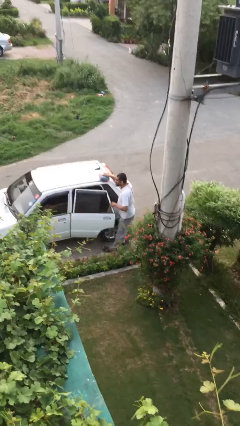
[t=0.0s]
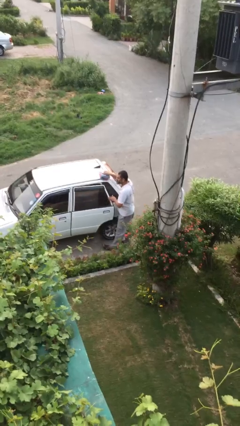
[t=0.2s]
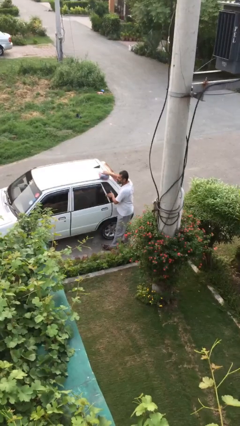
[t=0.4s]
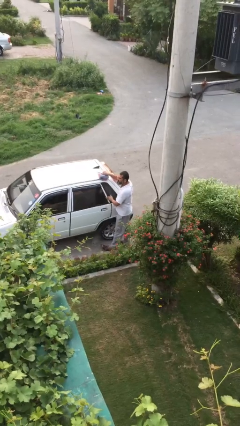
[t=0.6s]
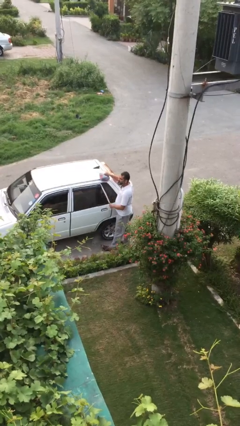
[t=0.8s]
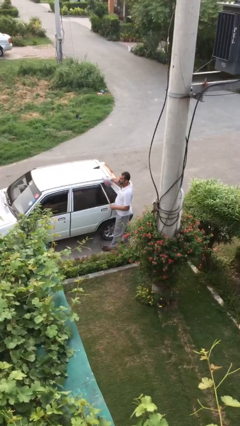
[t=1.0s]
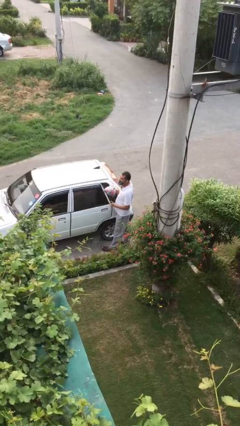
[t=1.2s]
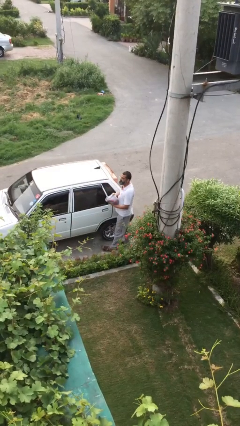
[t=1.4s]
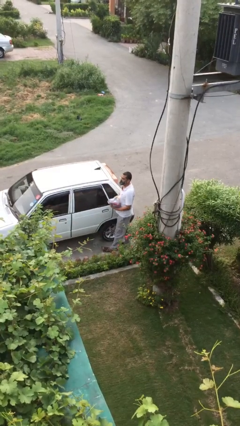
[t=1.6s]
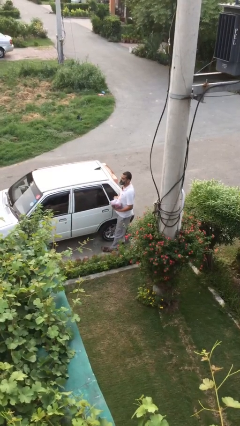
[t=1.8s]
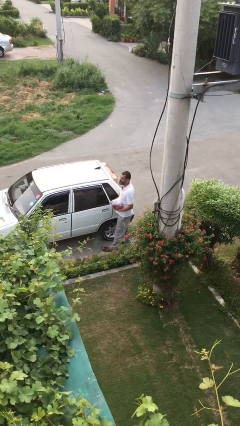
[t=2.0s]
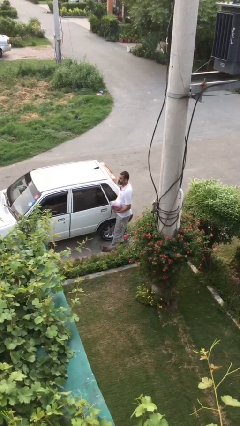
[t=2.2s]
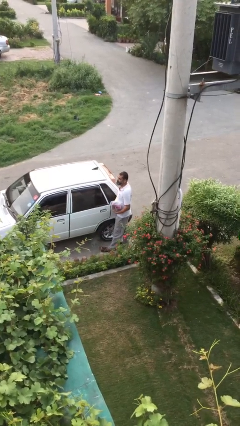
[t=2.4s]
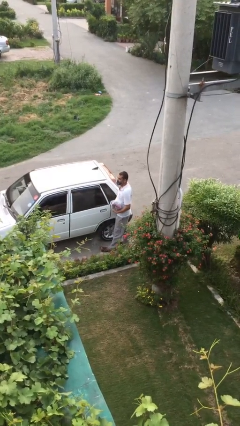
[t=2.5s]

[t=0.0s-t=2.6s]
person closes car door

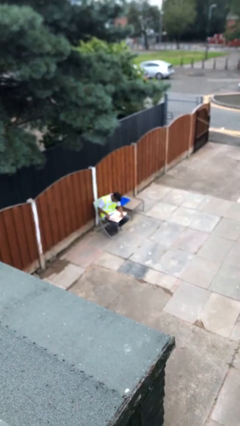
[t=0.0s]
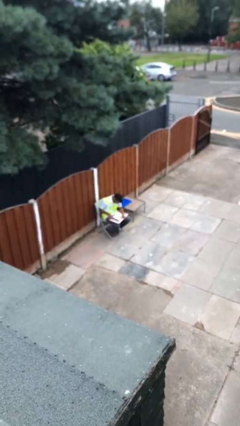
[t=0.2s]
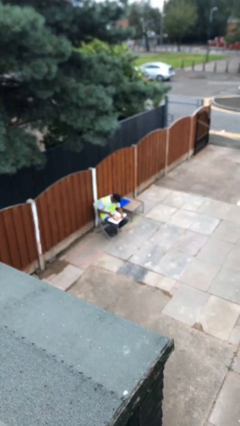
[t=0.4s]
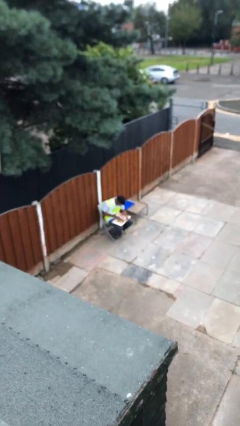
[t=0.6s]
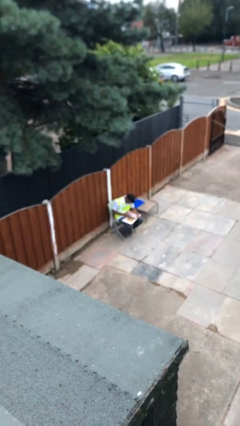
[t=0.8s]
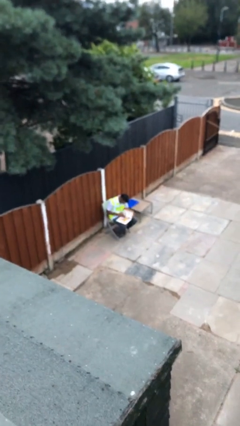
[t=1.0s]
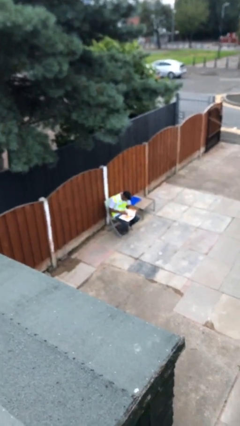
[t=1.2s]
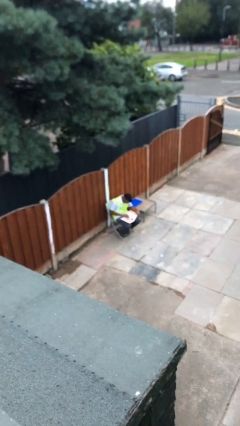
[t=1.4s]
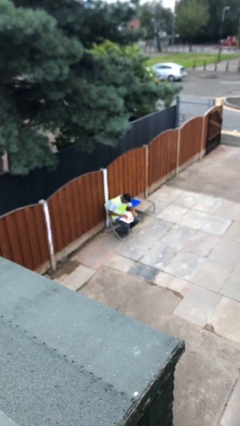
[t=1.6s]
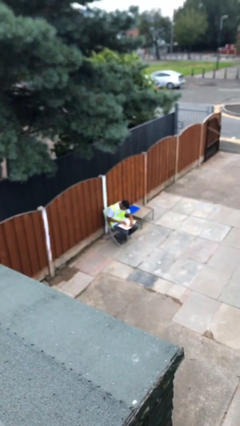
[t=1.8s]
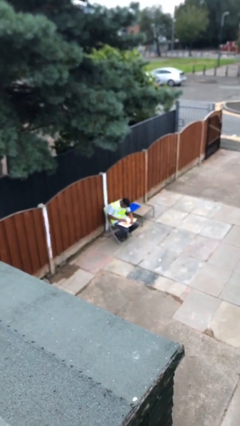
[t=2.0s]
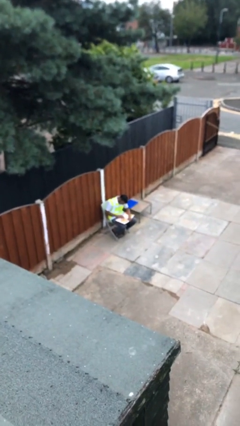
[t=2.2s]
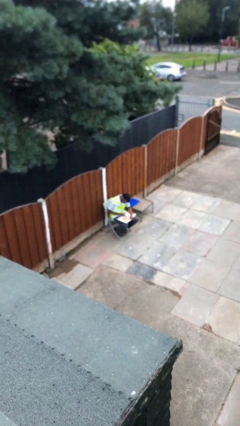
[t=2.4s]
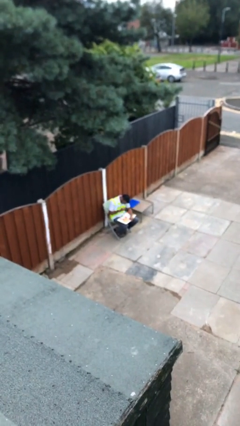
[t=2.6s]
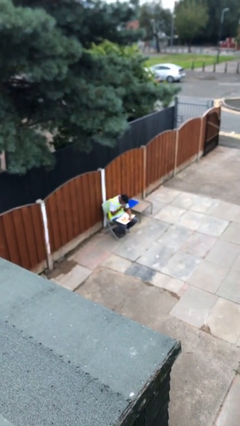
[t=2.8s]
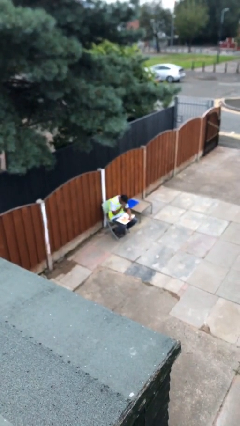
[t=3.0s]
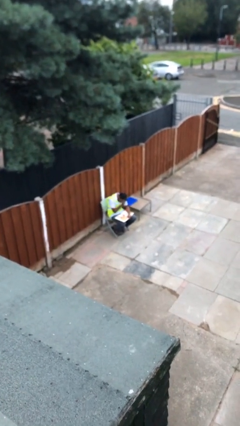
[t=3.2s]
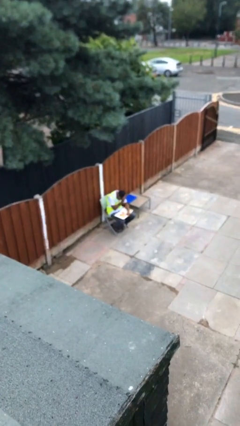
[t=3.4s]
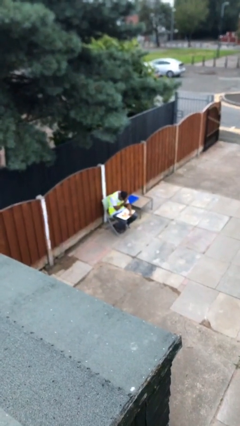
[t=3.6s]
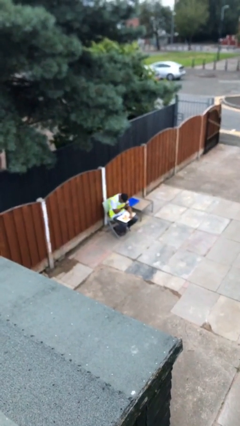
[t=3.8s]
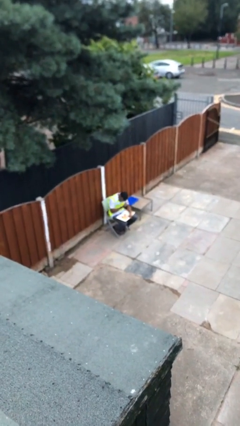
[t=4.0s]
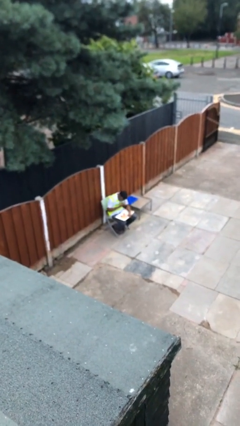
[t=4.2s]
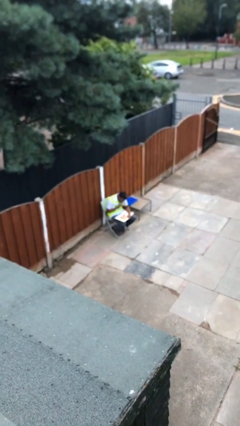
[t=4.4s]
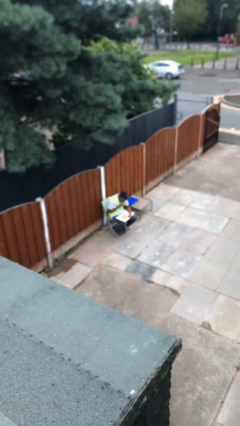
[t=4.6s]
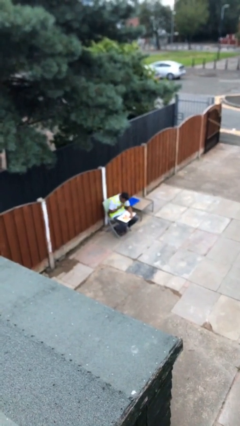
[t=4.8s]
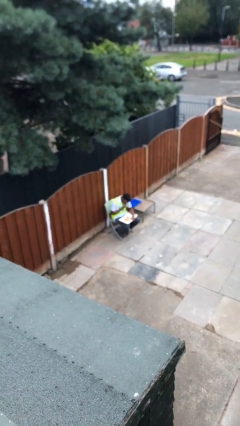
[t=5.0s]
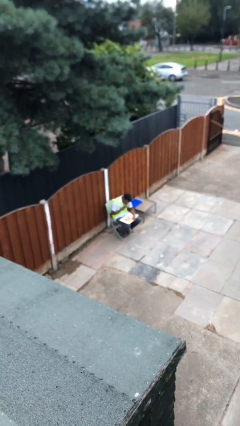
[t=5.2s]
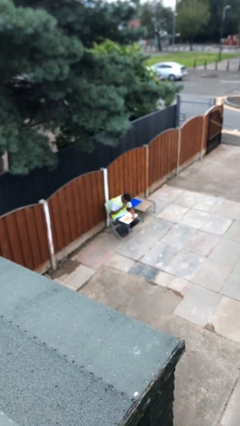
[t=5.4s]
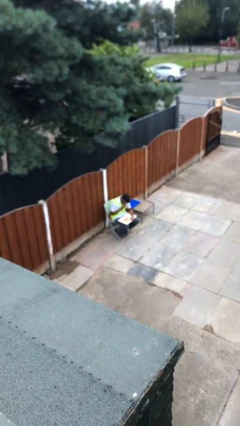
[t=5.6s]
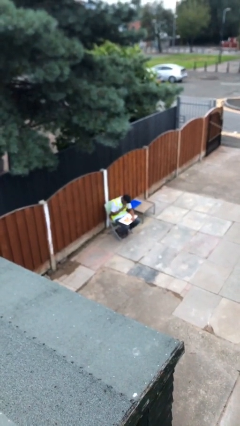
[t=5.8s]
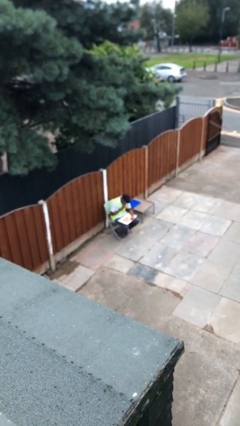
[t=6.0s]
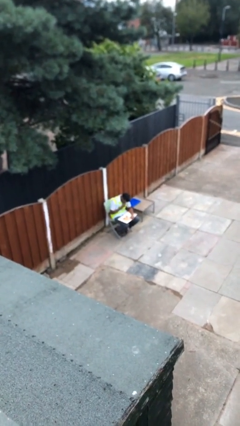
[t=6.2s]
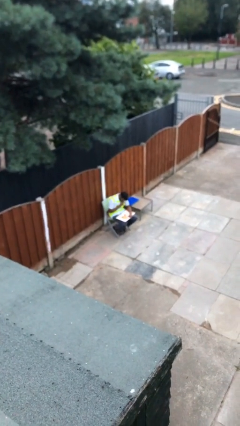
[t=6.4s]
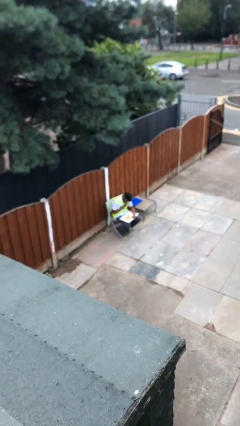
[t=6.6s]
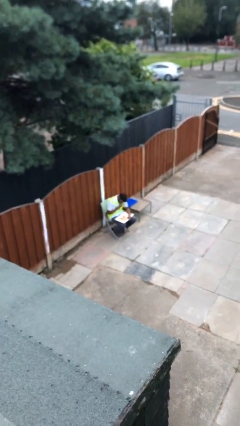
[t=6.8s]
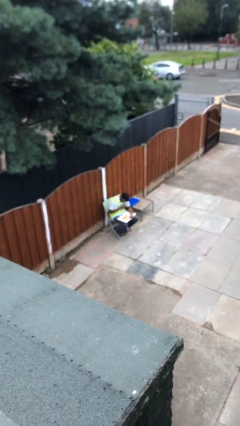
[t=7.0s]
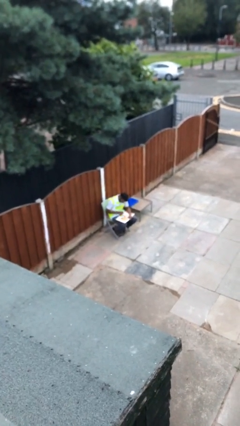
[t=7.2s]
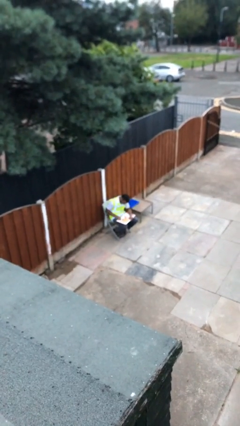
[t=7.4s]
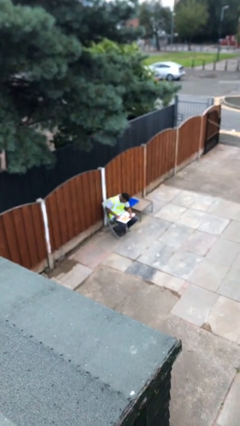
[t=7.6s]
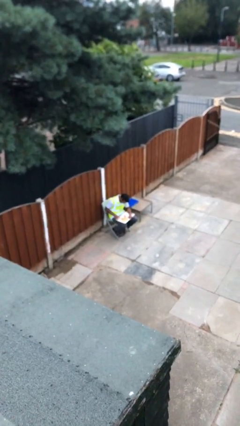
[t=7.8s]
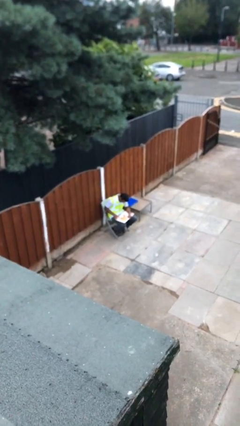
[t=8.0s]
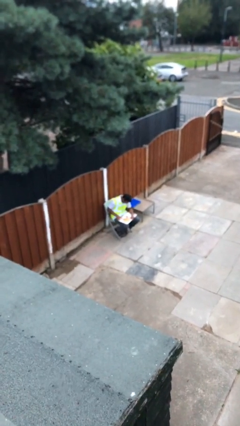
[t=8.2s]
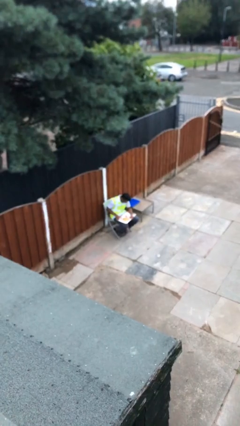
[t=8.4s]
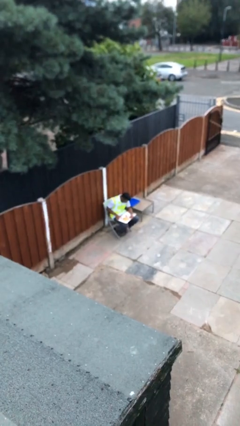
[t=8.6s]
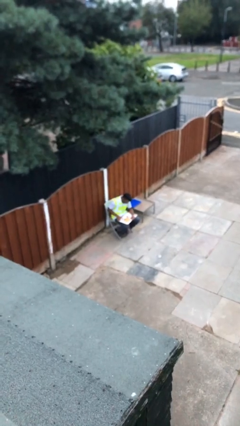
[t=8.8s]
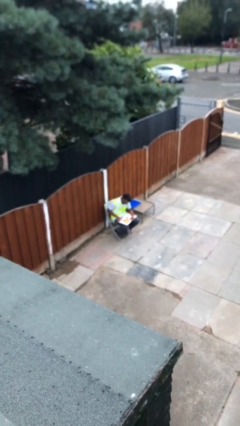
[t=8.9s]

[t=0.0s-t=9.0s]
person reads document

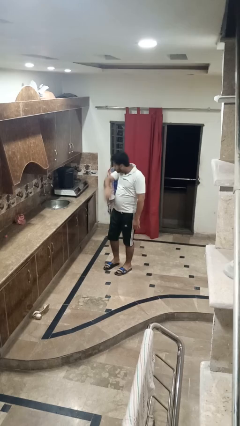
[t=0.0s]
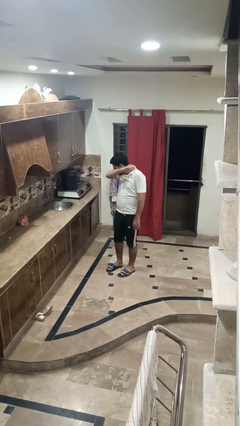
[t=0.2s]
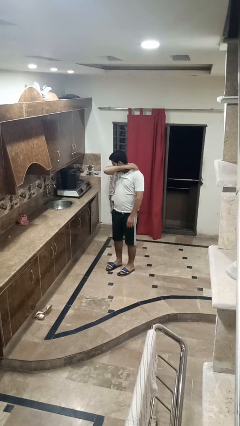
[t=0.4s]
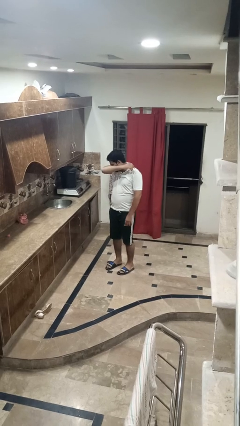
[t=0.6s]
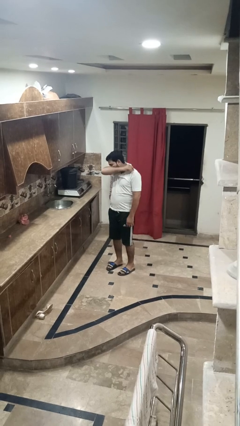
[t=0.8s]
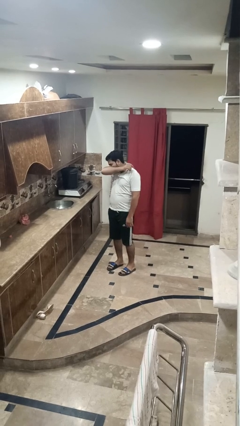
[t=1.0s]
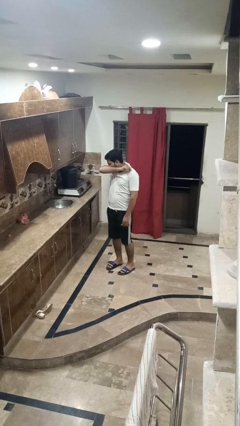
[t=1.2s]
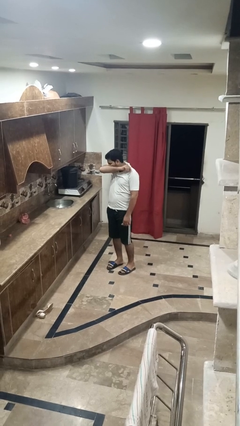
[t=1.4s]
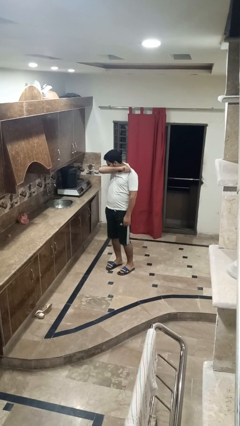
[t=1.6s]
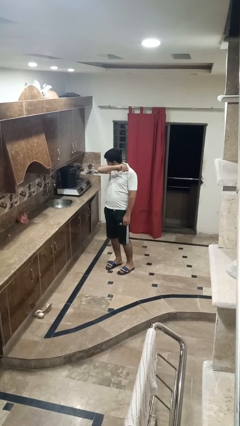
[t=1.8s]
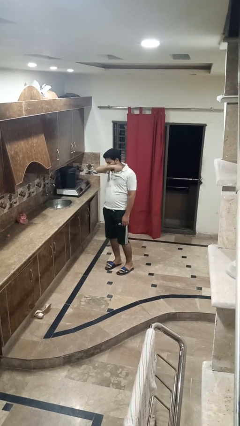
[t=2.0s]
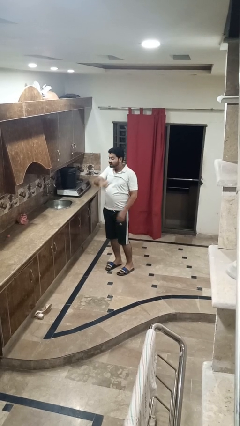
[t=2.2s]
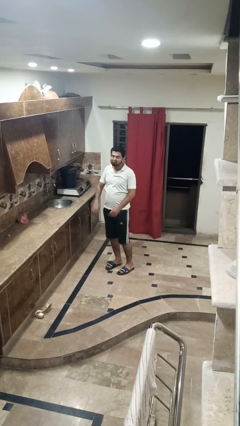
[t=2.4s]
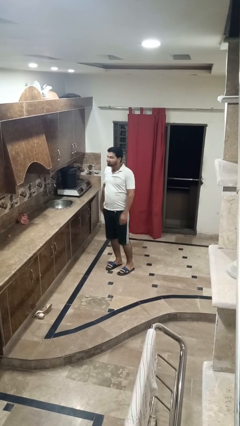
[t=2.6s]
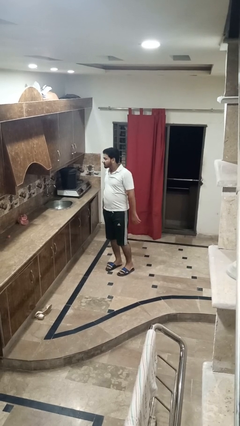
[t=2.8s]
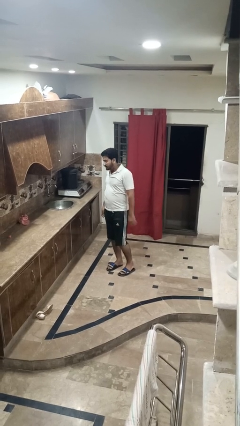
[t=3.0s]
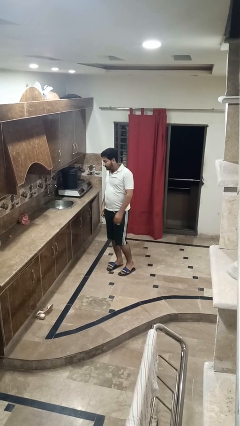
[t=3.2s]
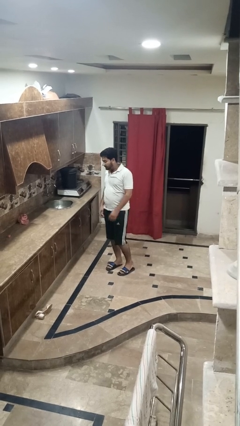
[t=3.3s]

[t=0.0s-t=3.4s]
person sneezes into arm

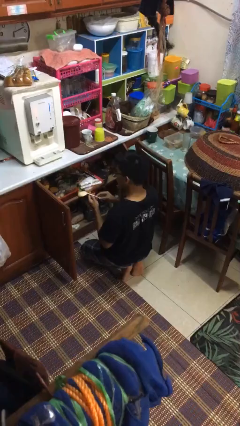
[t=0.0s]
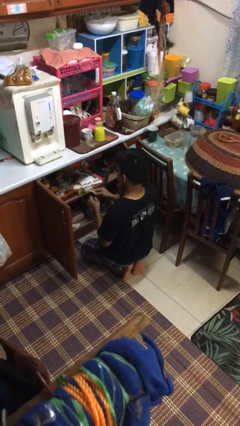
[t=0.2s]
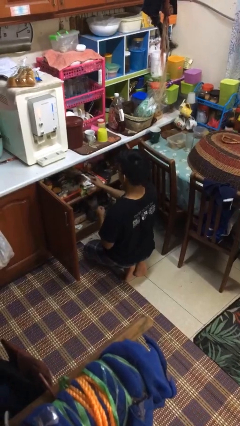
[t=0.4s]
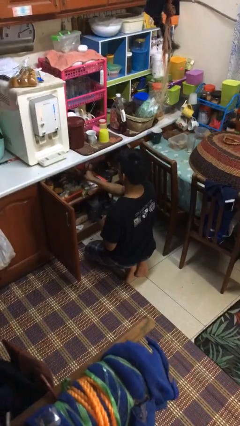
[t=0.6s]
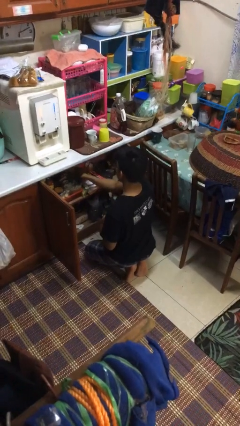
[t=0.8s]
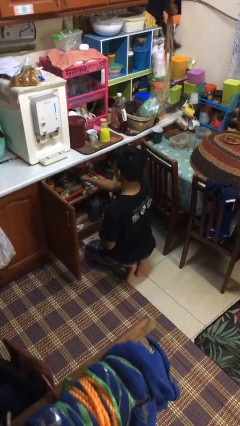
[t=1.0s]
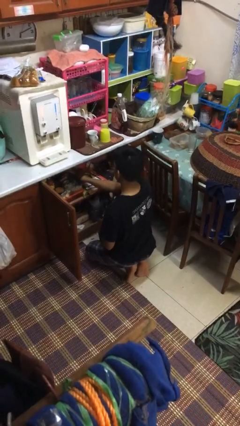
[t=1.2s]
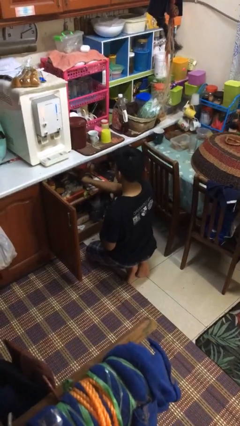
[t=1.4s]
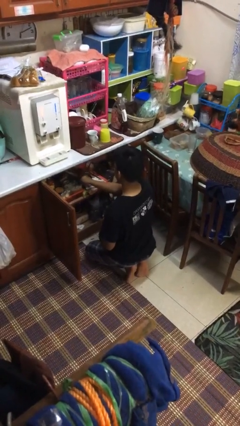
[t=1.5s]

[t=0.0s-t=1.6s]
person puts object into kitchen drawer

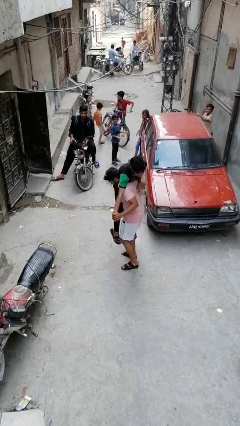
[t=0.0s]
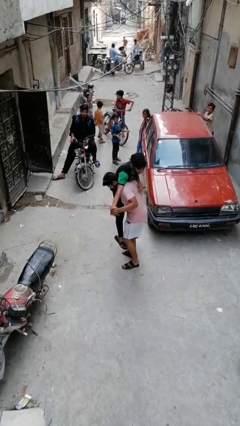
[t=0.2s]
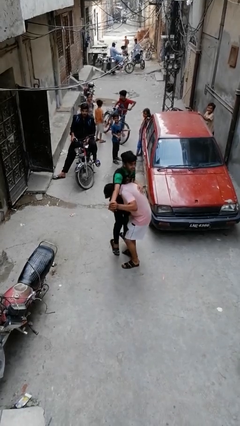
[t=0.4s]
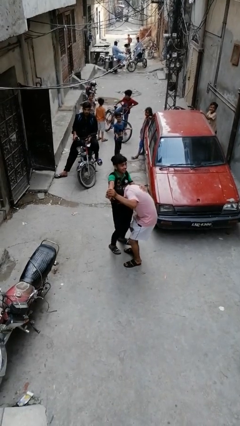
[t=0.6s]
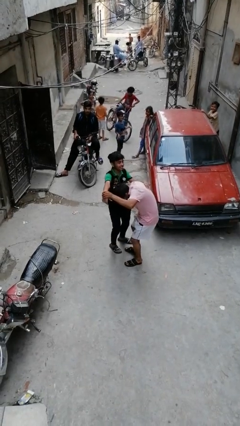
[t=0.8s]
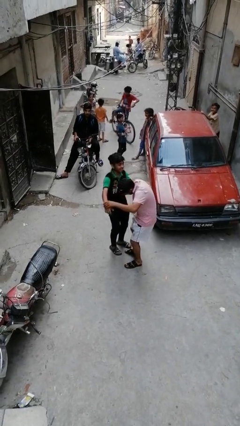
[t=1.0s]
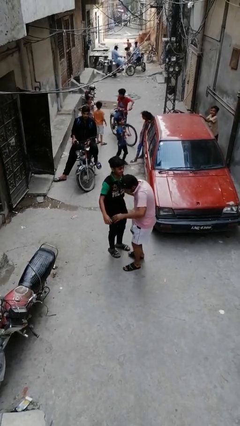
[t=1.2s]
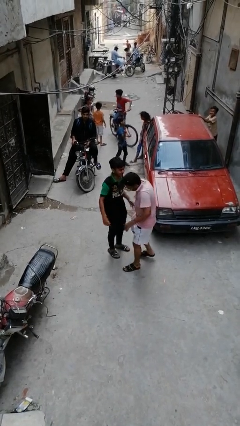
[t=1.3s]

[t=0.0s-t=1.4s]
person puts down person
